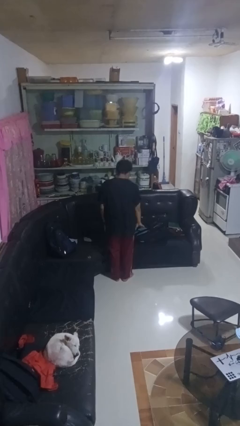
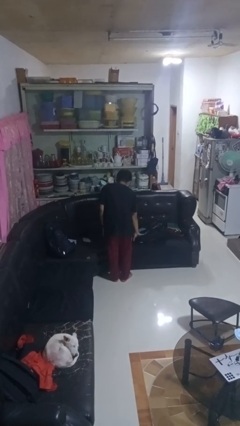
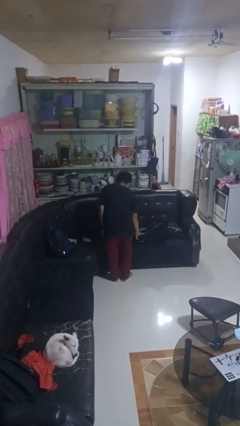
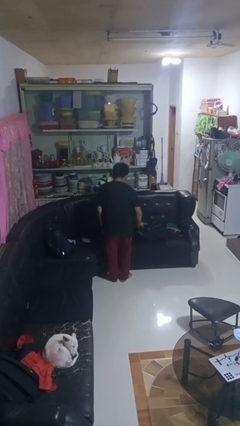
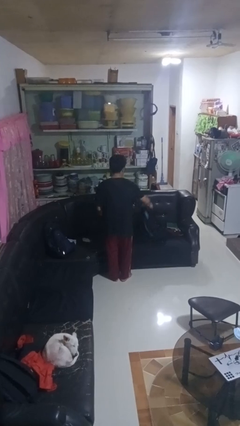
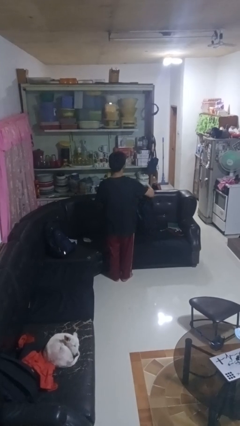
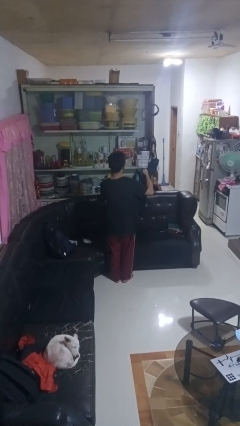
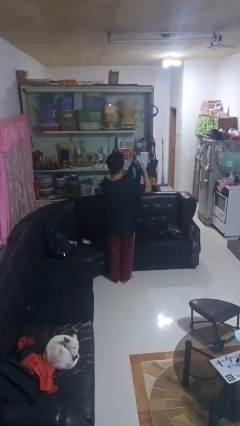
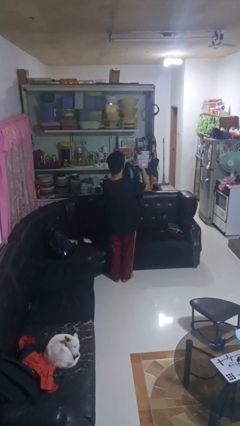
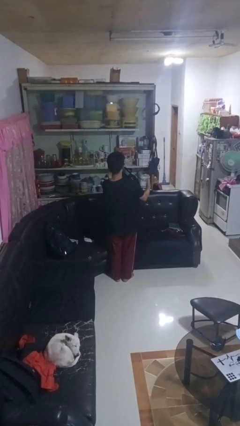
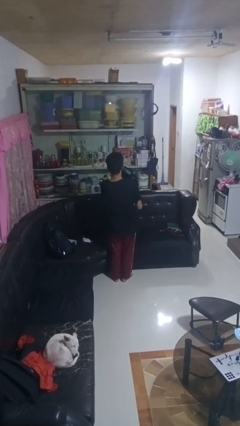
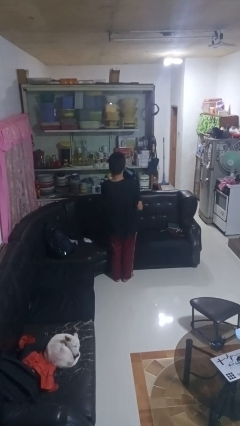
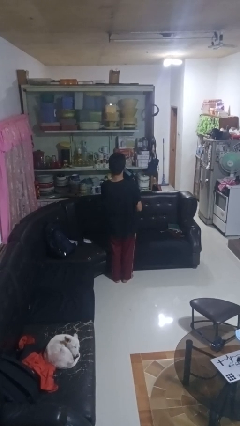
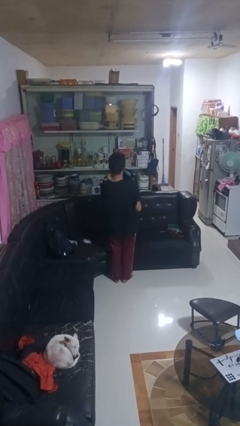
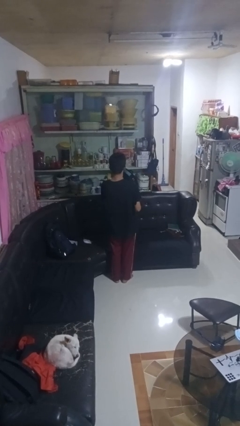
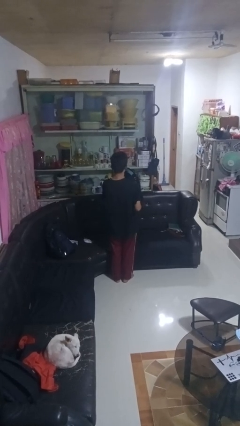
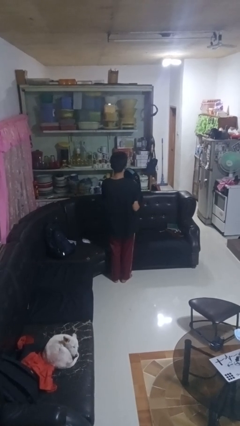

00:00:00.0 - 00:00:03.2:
person picks up object from couch

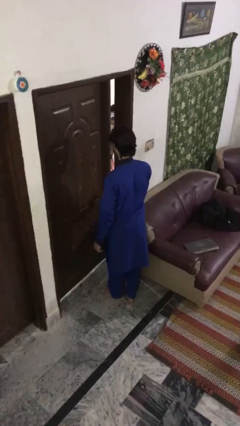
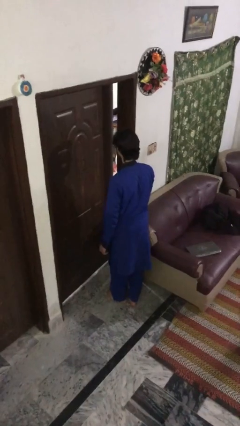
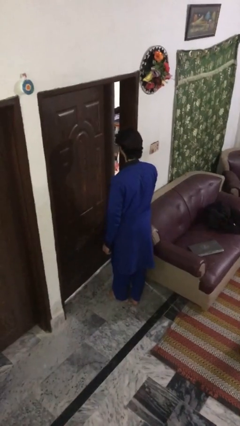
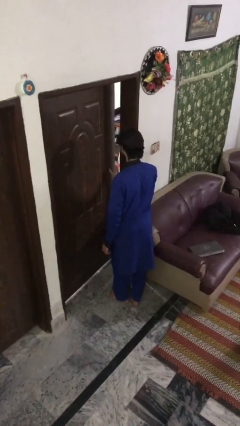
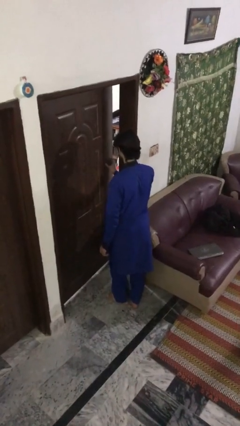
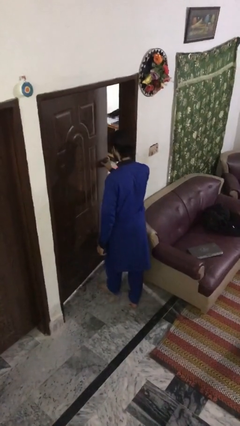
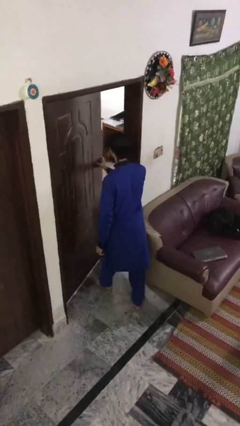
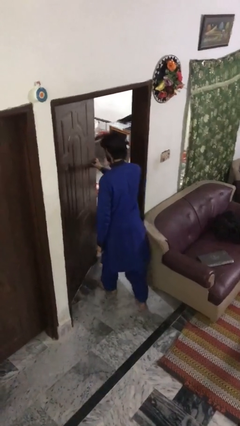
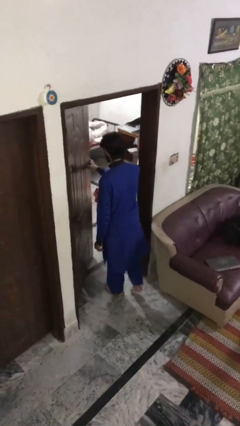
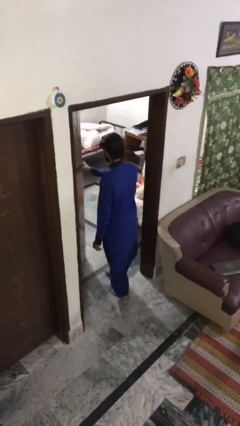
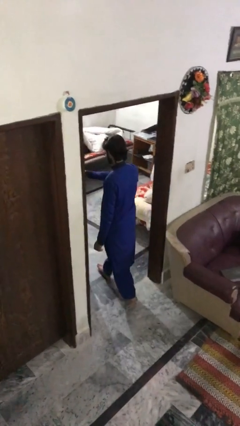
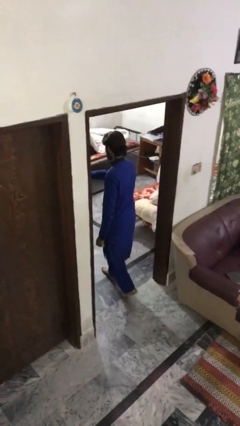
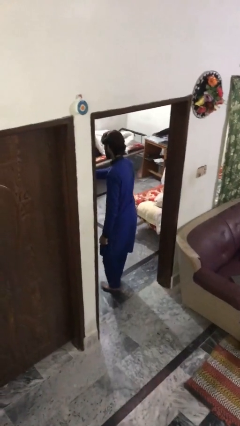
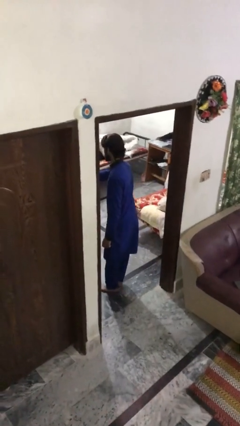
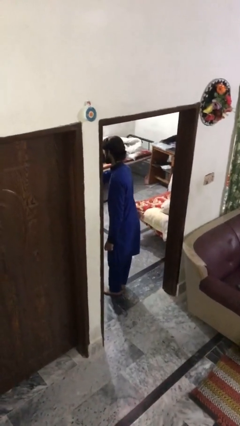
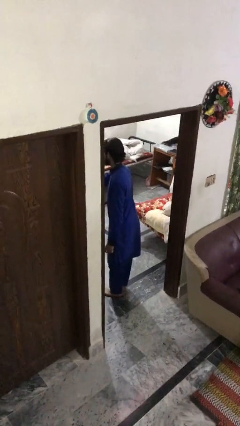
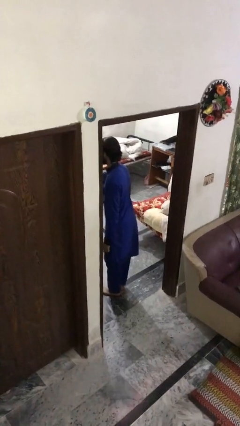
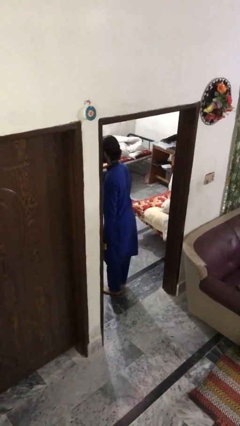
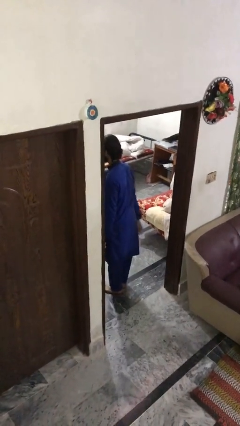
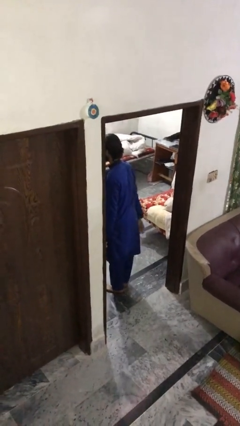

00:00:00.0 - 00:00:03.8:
person opens facility door

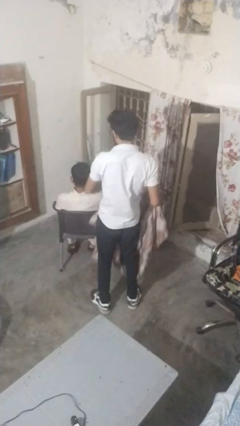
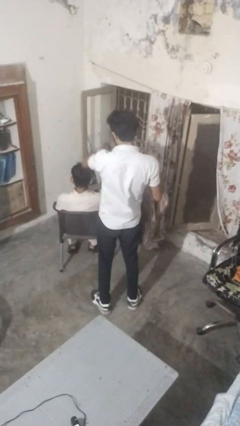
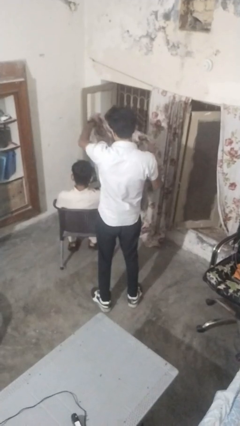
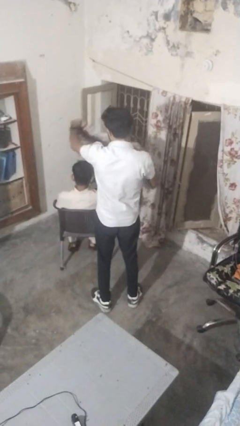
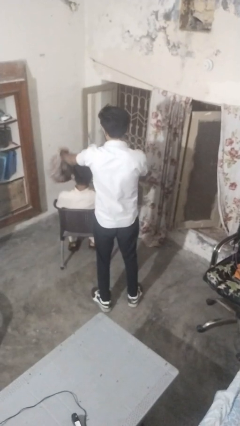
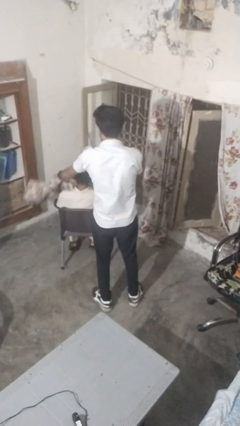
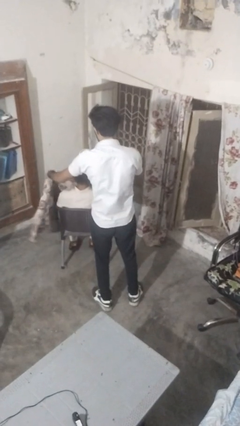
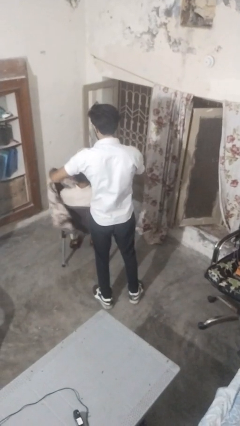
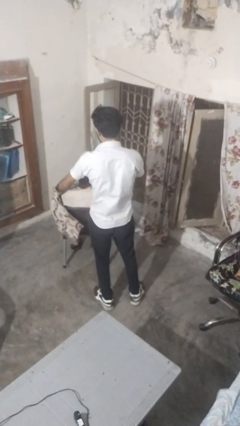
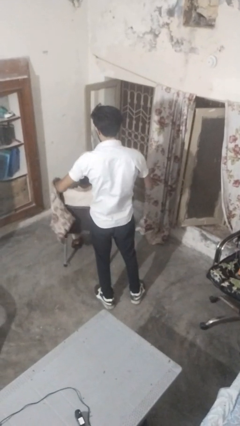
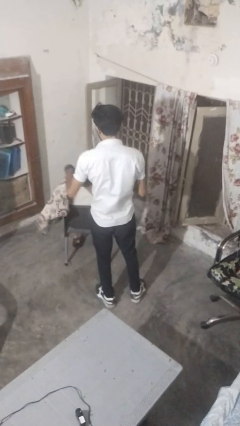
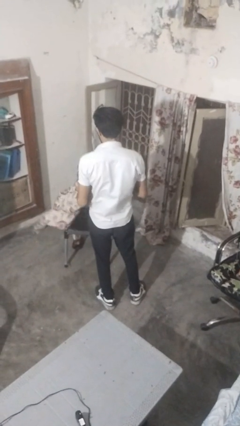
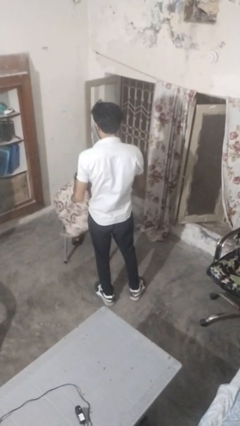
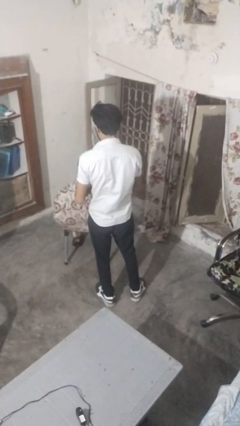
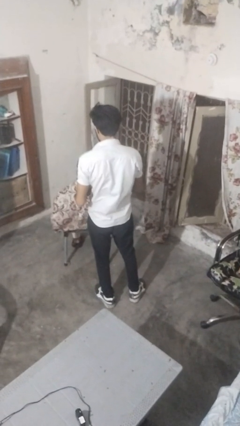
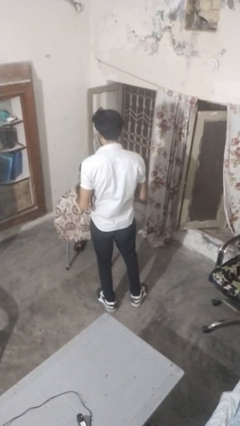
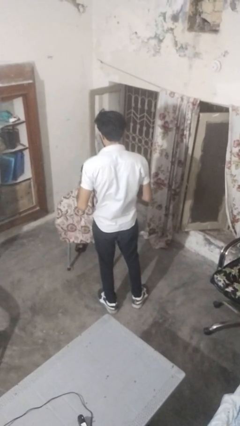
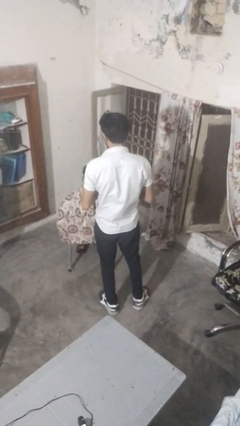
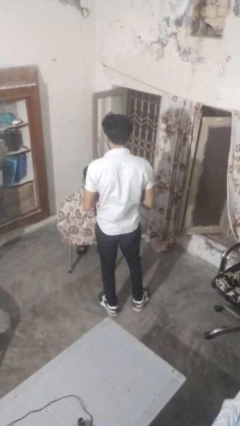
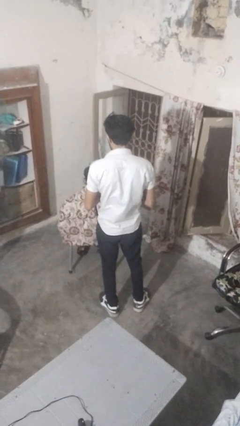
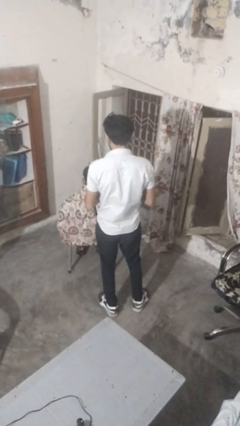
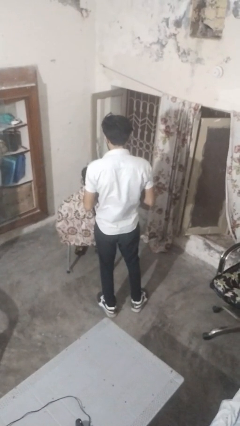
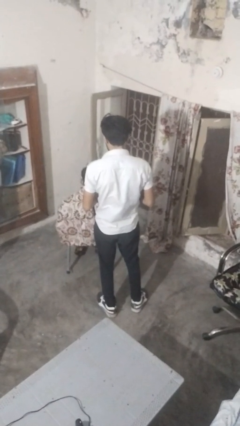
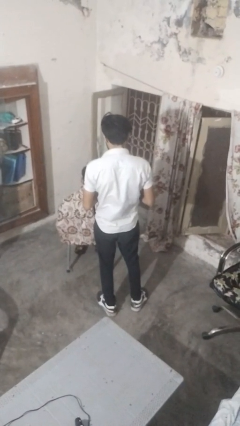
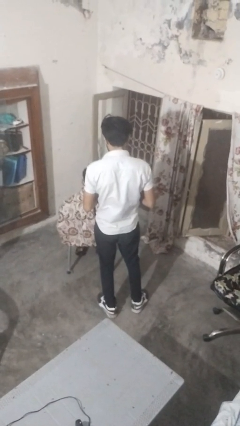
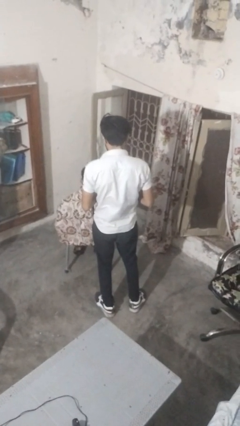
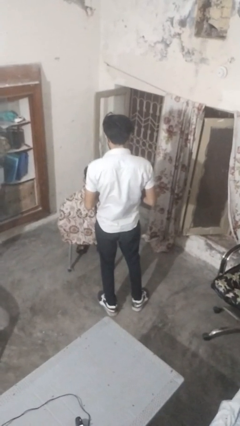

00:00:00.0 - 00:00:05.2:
person covers friend with blanket

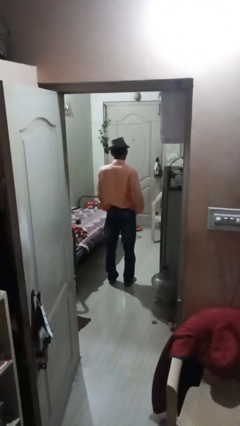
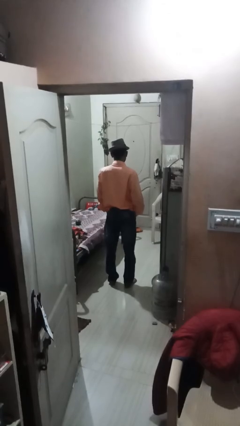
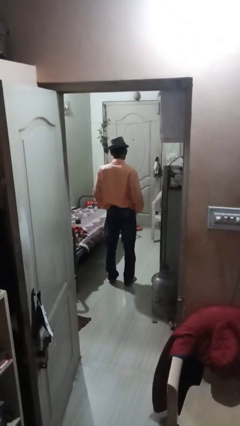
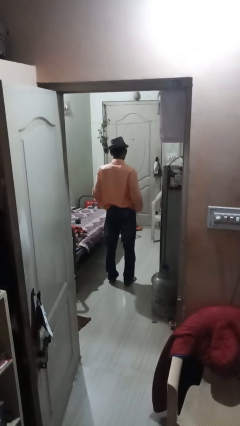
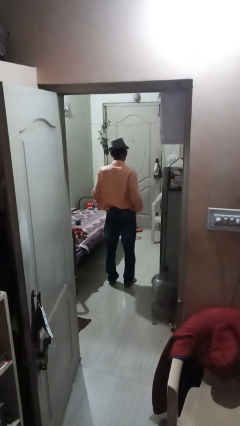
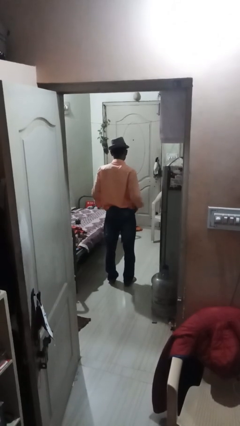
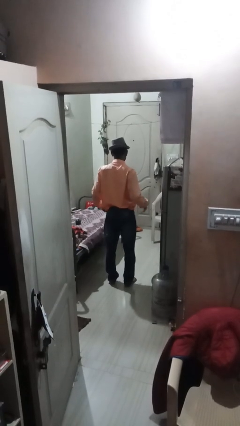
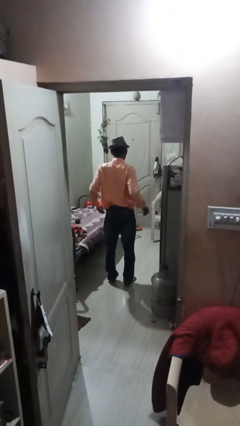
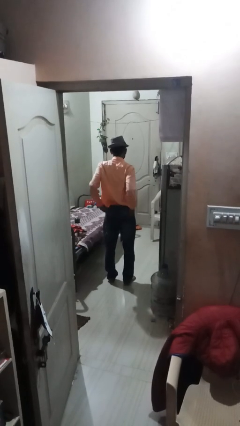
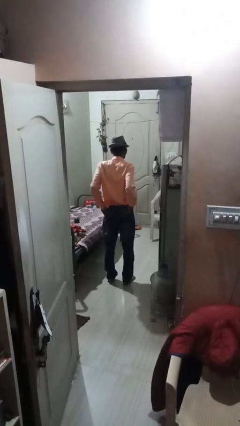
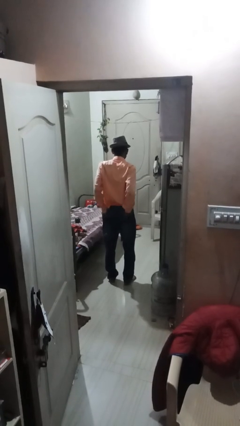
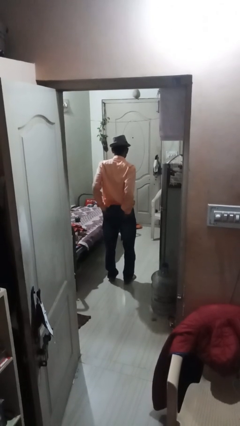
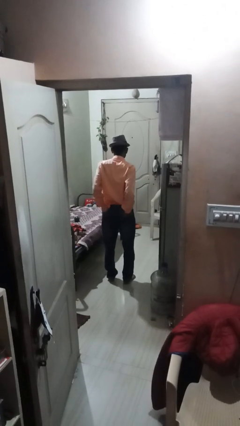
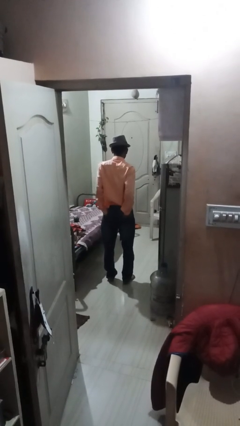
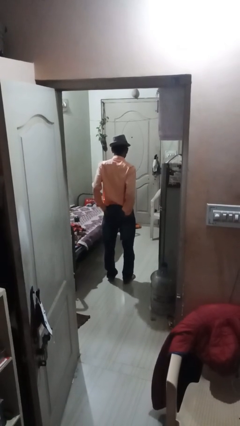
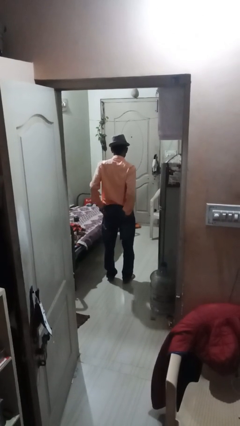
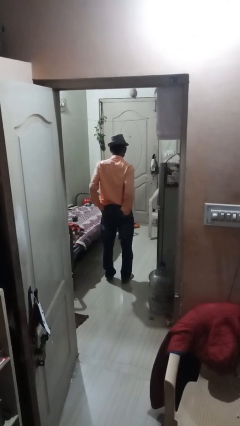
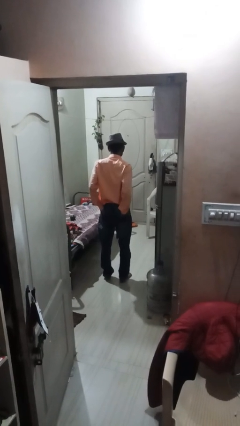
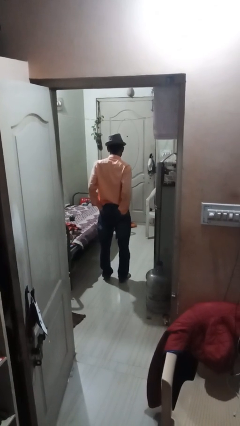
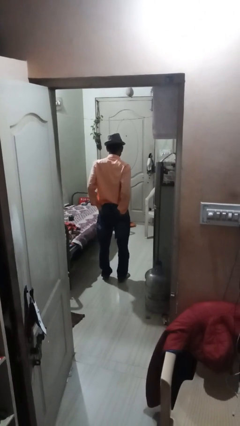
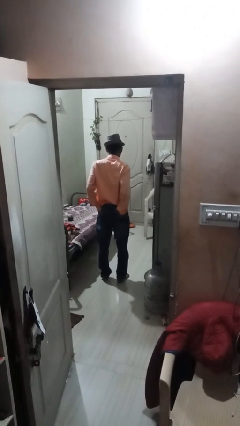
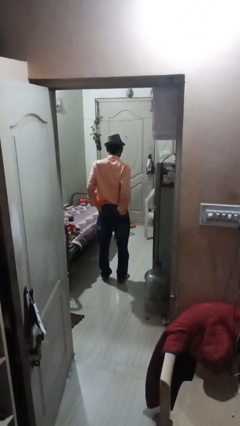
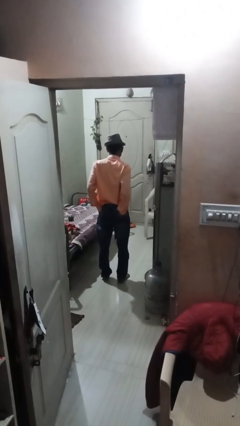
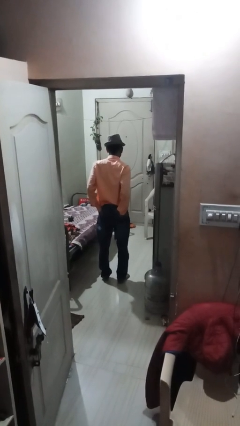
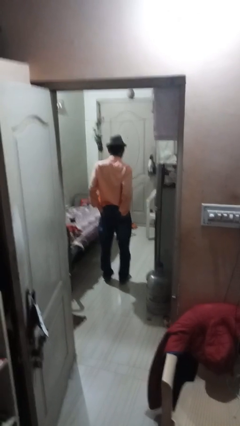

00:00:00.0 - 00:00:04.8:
person puts hands in back pockets

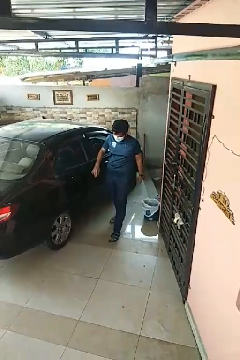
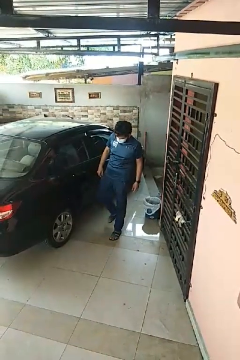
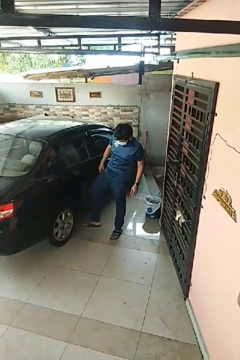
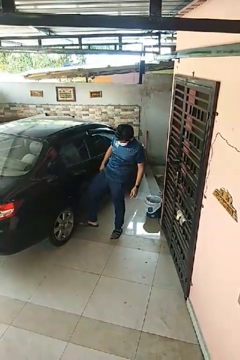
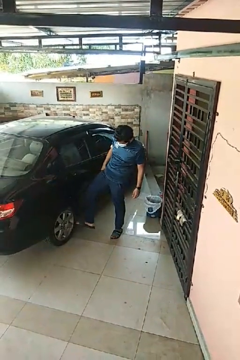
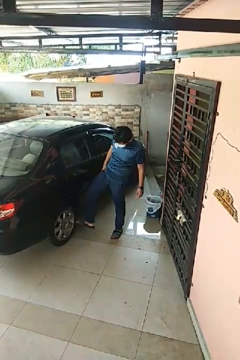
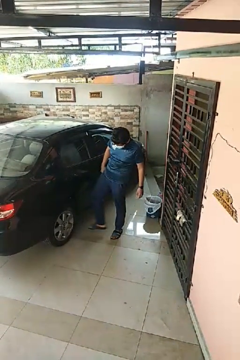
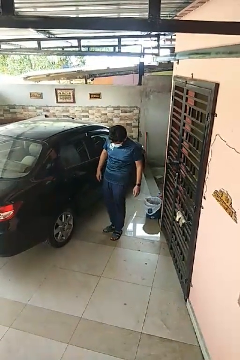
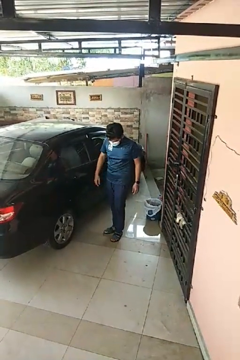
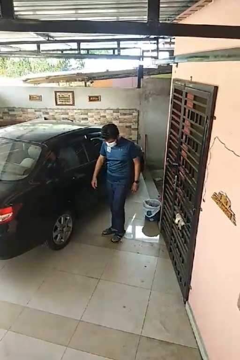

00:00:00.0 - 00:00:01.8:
person kicks car tires
